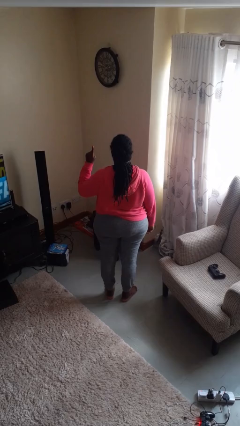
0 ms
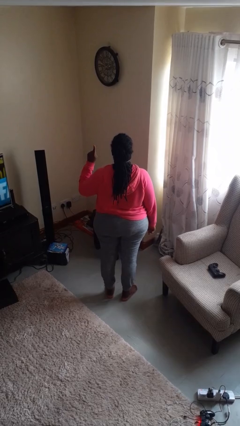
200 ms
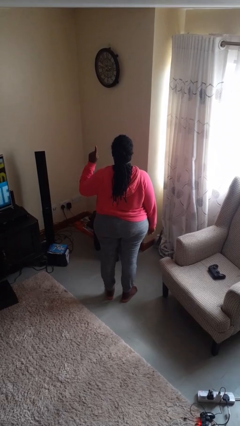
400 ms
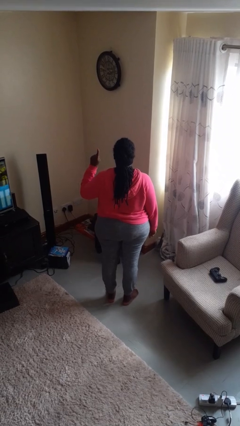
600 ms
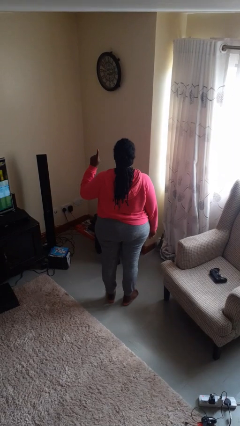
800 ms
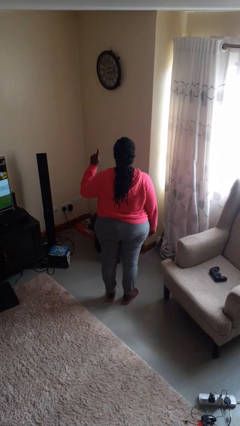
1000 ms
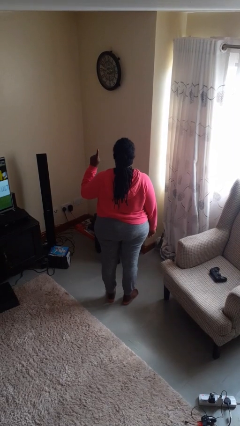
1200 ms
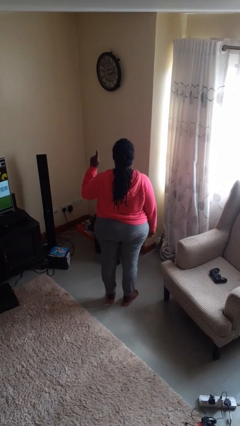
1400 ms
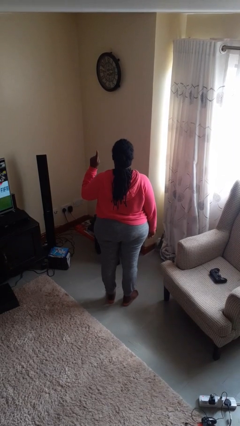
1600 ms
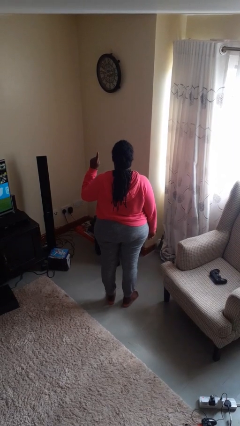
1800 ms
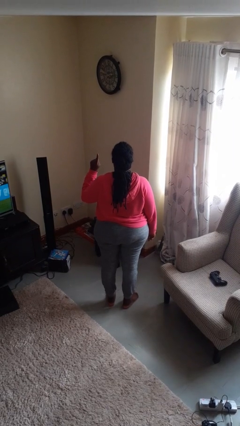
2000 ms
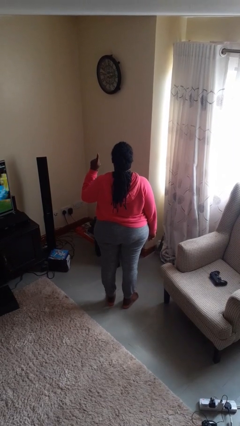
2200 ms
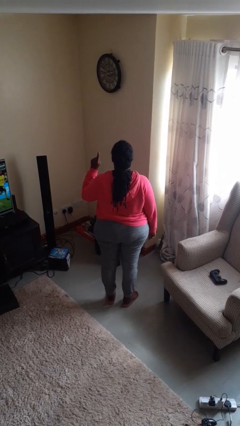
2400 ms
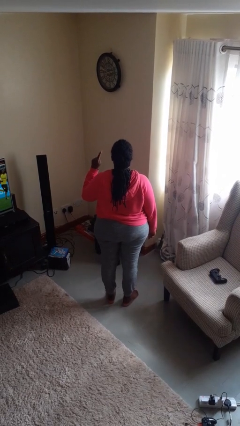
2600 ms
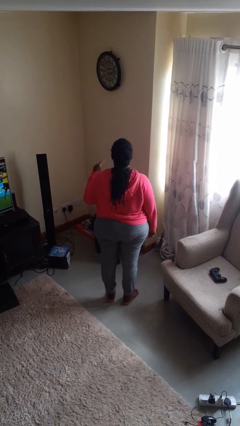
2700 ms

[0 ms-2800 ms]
person gestures number one

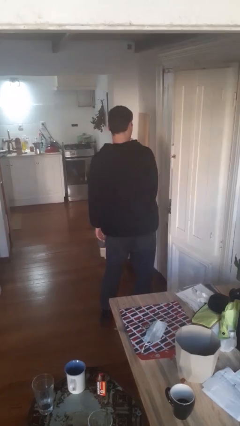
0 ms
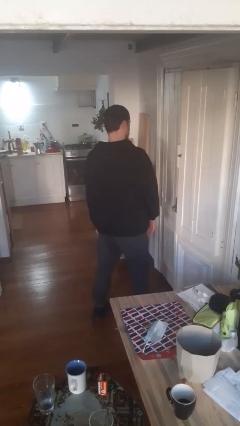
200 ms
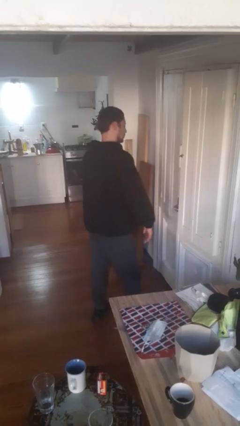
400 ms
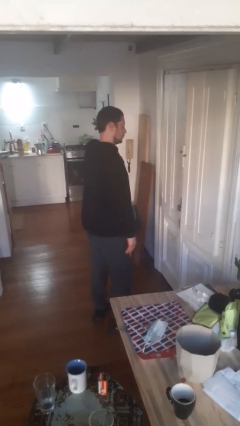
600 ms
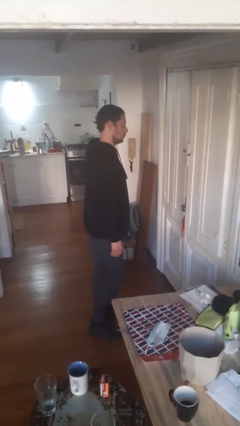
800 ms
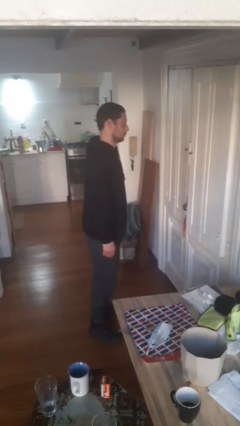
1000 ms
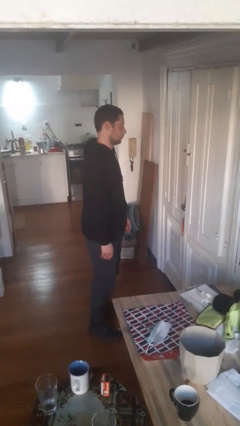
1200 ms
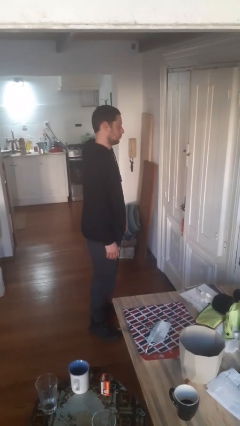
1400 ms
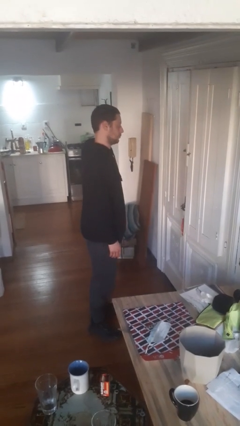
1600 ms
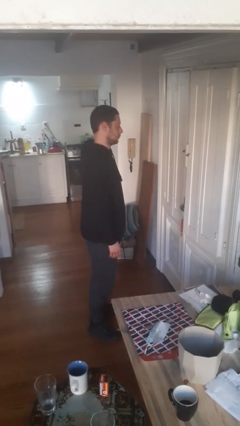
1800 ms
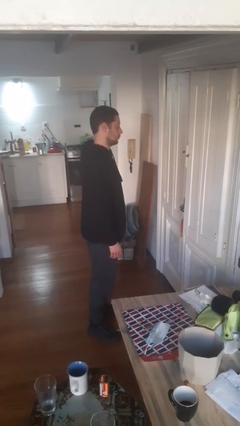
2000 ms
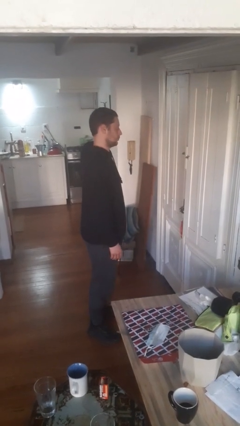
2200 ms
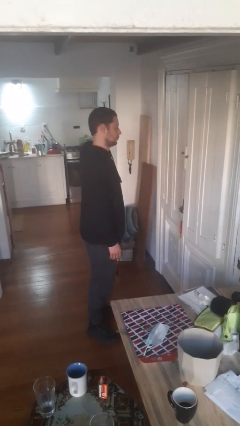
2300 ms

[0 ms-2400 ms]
person closes door with hip

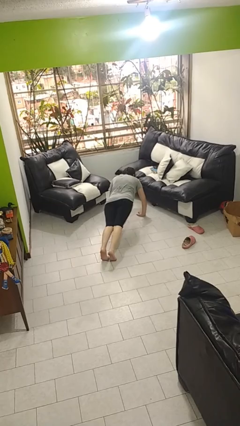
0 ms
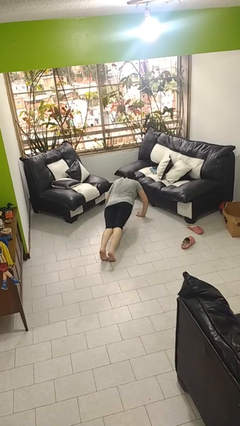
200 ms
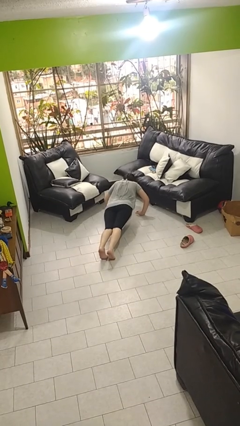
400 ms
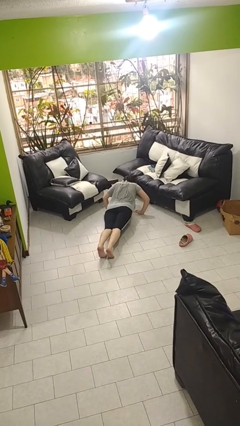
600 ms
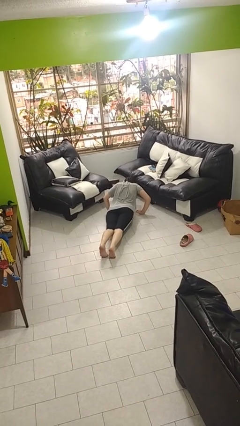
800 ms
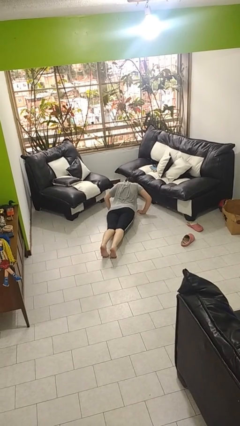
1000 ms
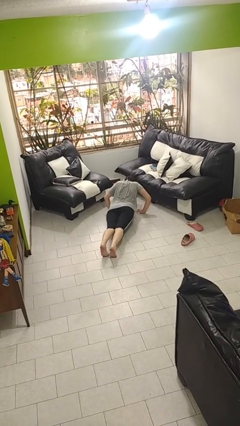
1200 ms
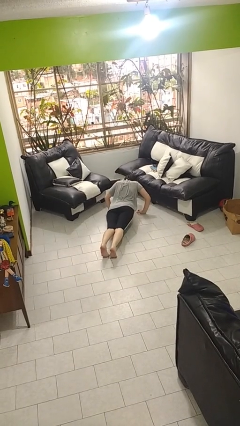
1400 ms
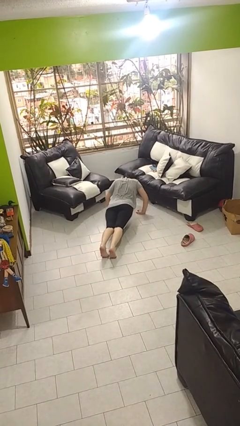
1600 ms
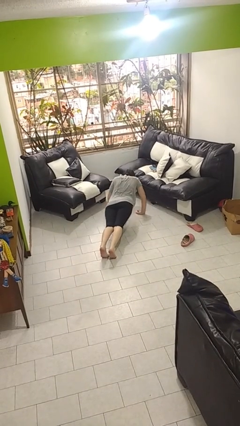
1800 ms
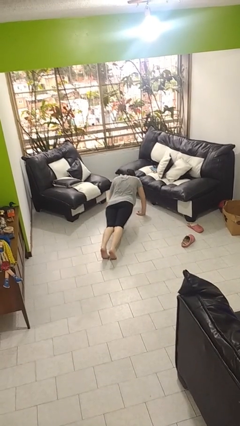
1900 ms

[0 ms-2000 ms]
person exercises with pushup

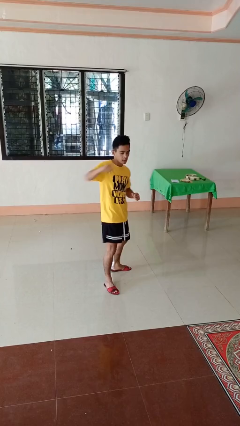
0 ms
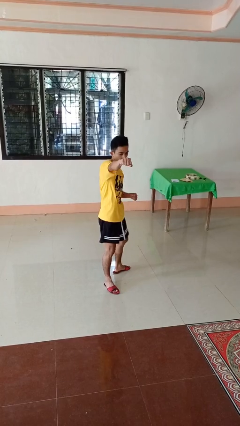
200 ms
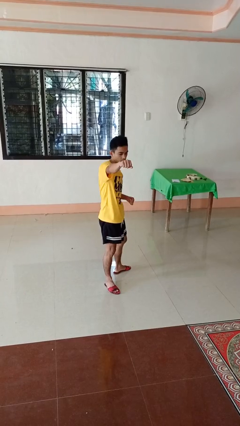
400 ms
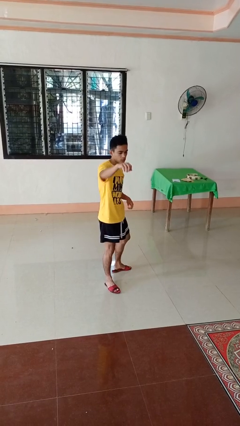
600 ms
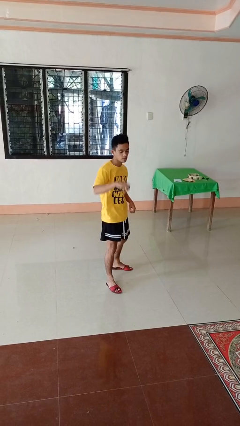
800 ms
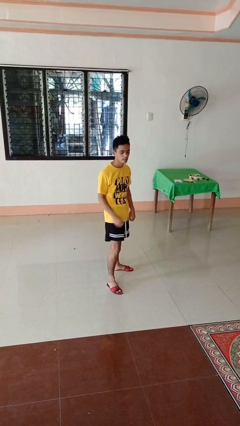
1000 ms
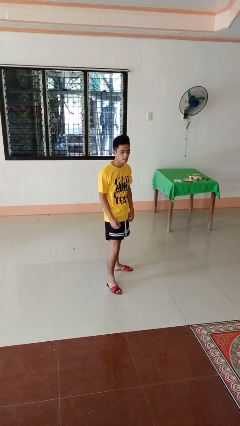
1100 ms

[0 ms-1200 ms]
person punches

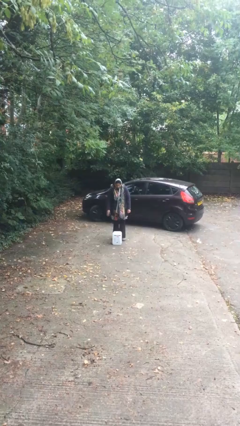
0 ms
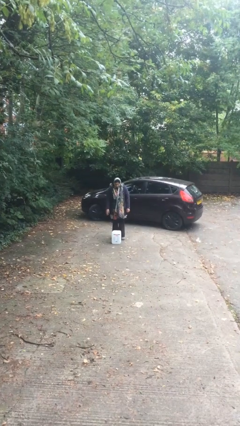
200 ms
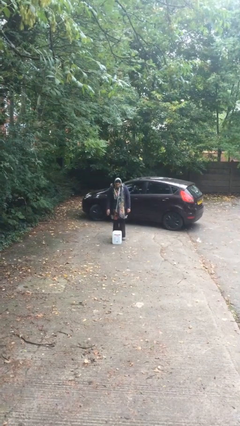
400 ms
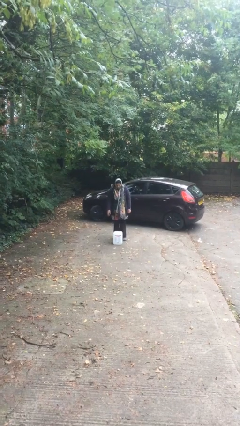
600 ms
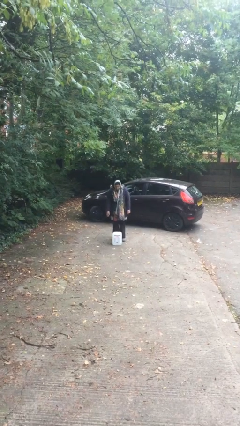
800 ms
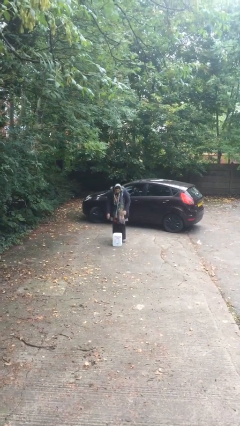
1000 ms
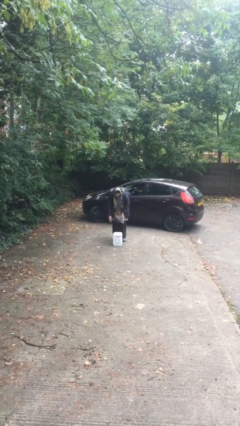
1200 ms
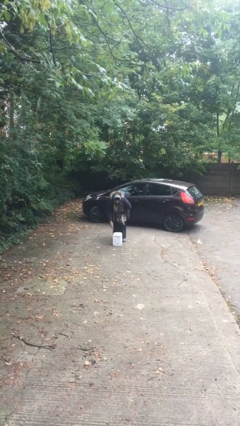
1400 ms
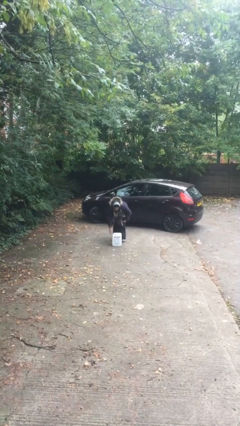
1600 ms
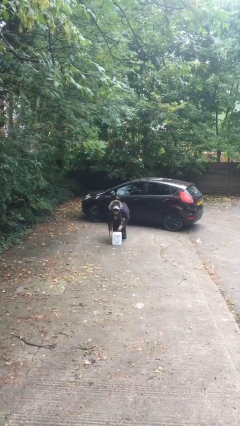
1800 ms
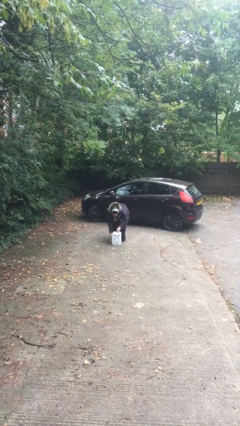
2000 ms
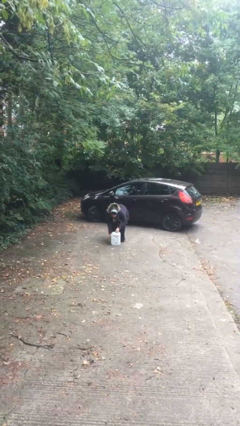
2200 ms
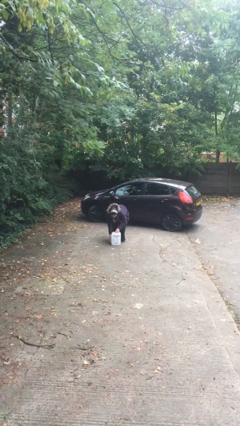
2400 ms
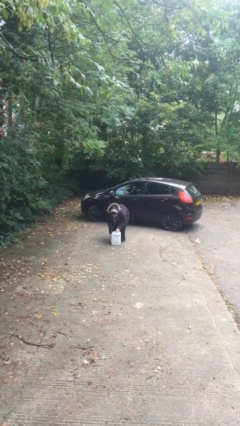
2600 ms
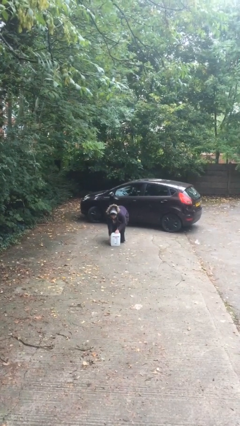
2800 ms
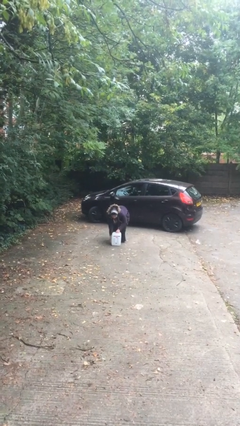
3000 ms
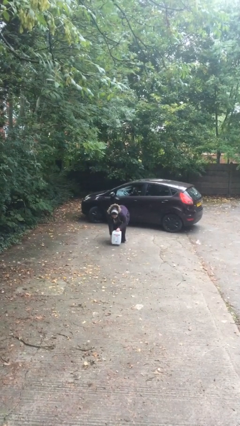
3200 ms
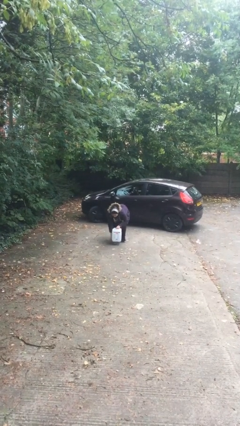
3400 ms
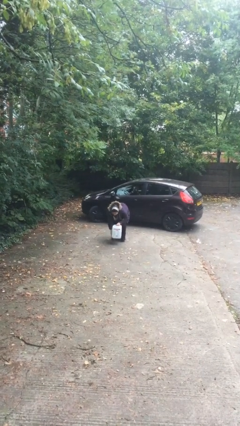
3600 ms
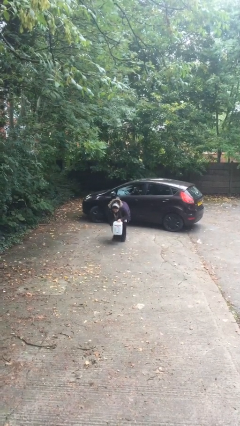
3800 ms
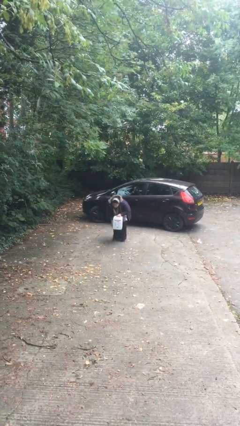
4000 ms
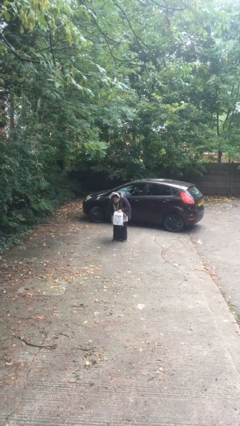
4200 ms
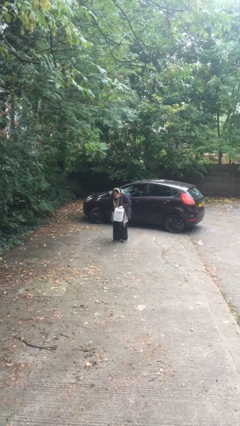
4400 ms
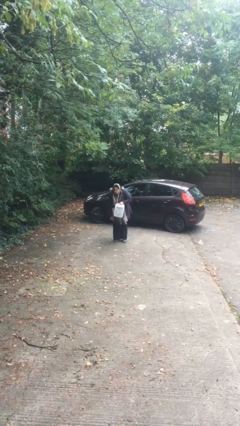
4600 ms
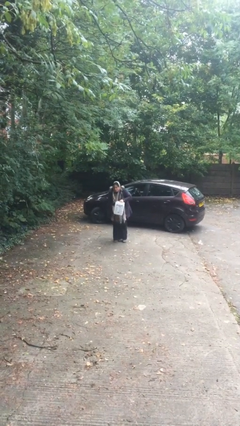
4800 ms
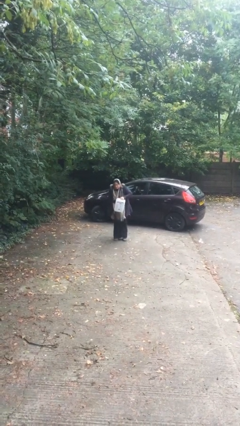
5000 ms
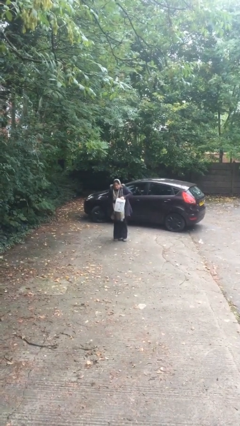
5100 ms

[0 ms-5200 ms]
person picks up object from floor

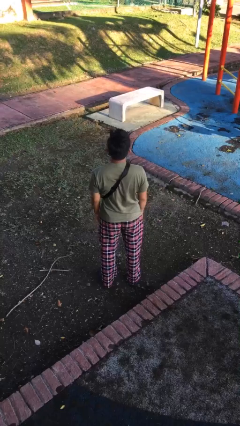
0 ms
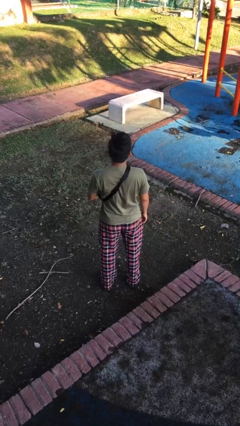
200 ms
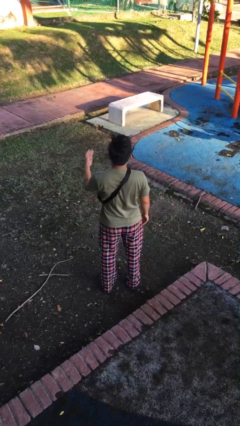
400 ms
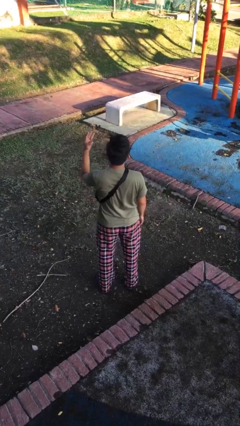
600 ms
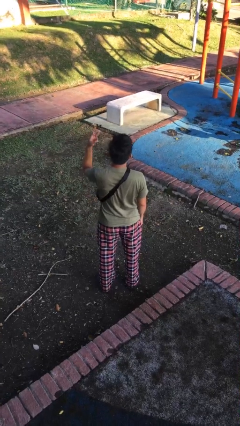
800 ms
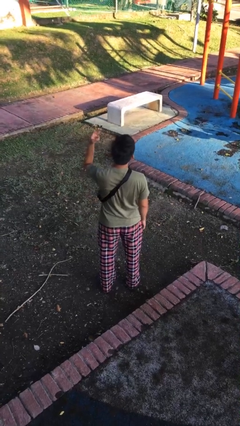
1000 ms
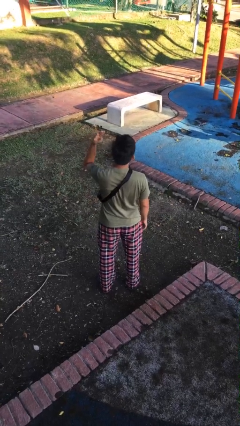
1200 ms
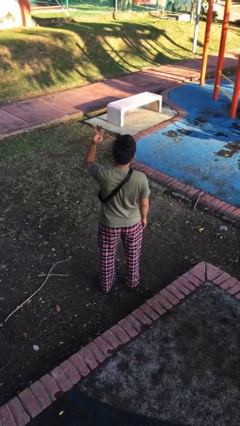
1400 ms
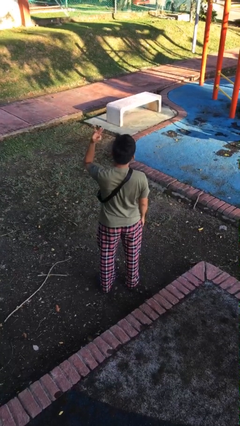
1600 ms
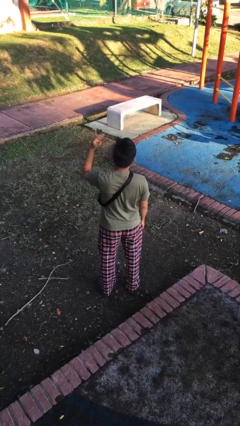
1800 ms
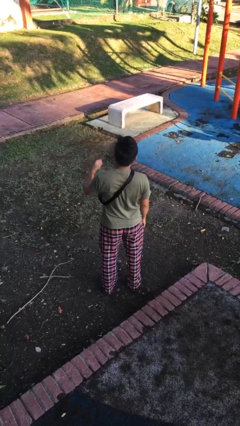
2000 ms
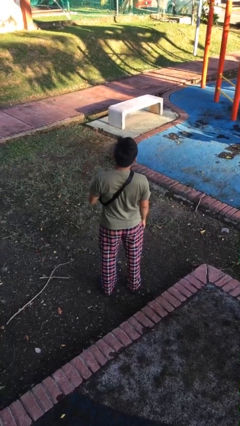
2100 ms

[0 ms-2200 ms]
person gestures number three

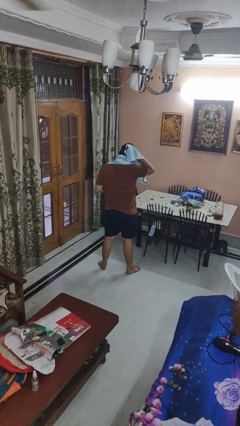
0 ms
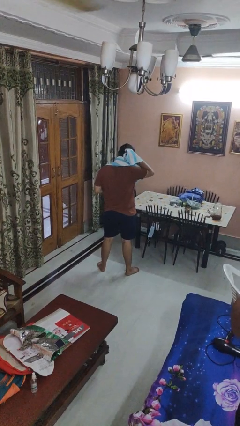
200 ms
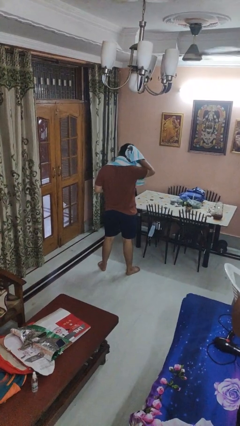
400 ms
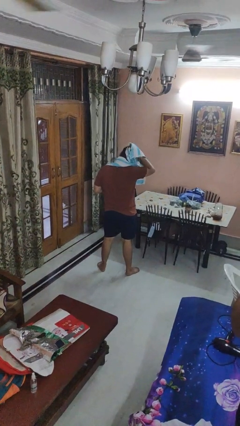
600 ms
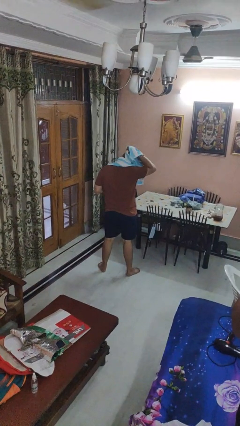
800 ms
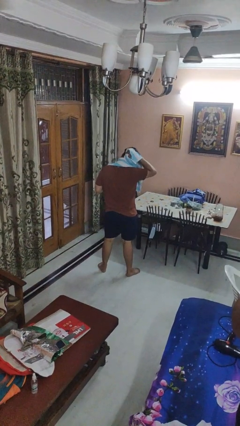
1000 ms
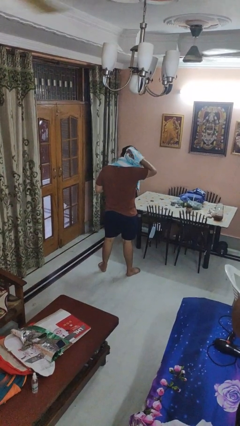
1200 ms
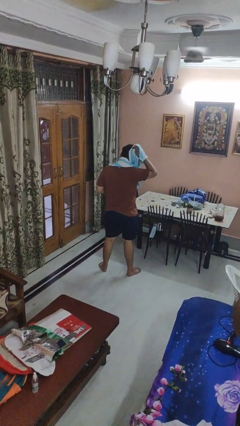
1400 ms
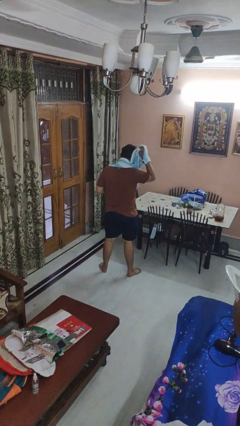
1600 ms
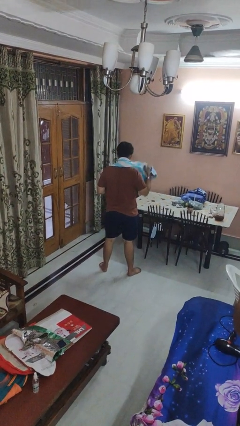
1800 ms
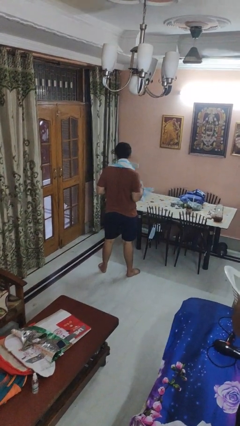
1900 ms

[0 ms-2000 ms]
person dries hair with towel
